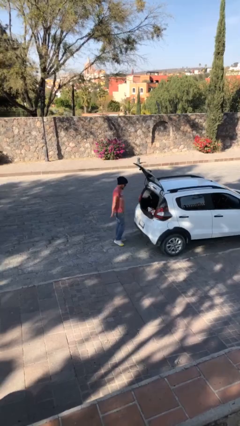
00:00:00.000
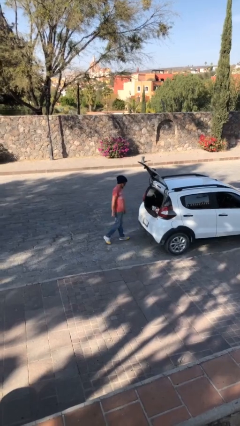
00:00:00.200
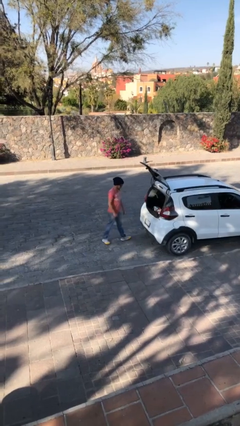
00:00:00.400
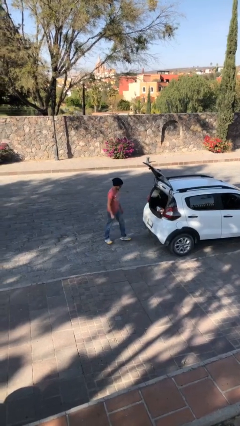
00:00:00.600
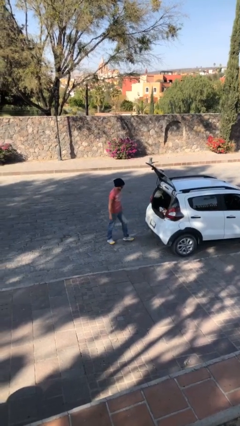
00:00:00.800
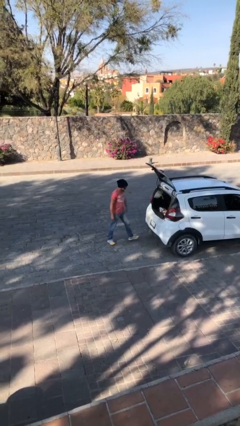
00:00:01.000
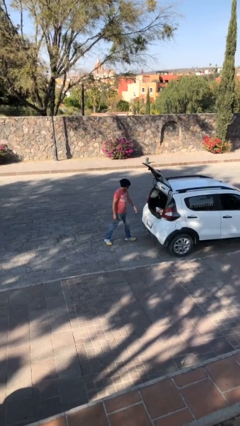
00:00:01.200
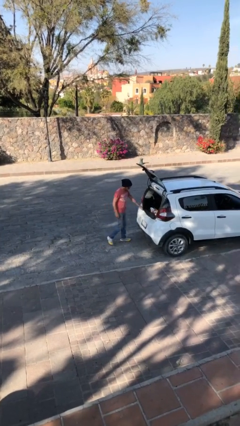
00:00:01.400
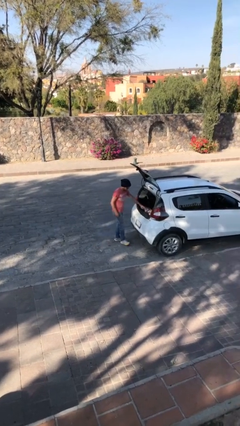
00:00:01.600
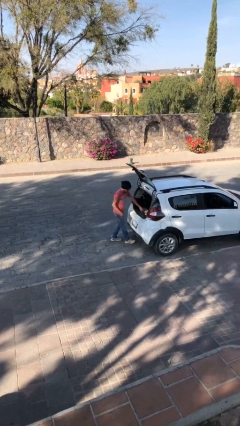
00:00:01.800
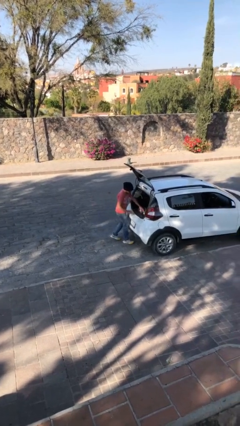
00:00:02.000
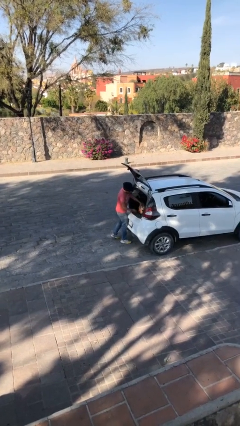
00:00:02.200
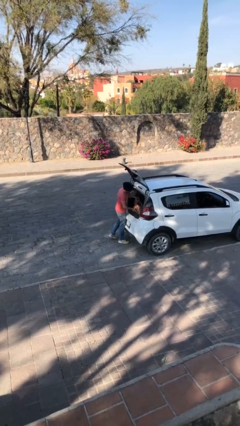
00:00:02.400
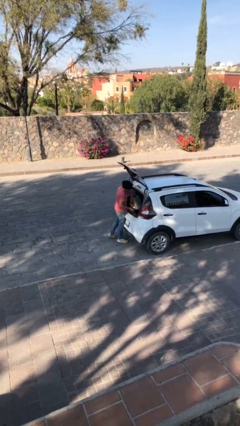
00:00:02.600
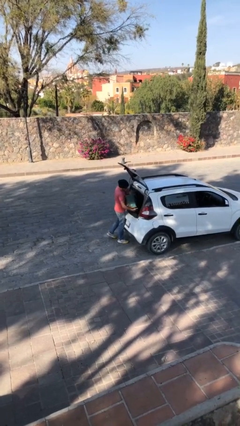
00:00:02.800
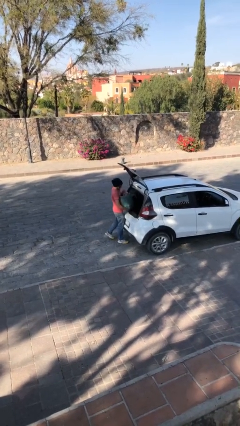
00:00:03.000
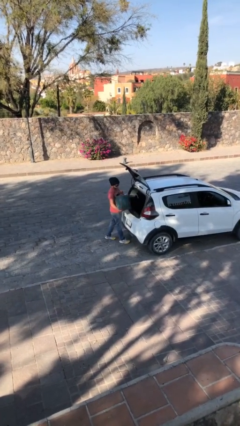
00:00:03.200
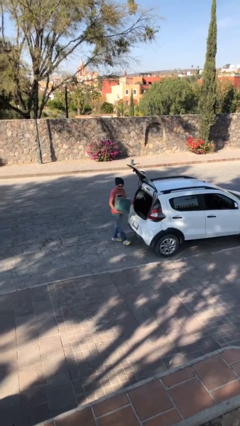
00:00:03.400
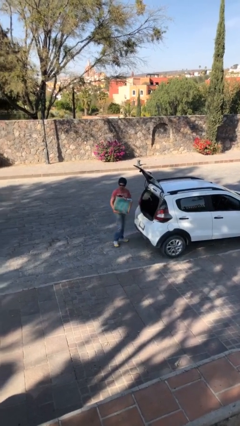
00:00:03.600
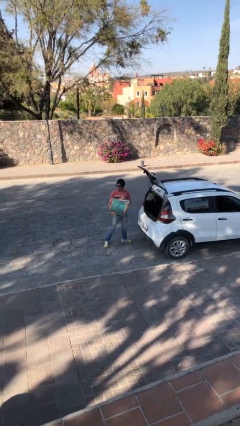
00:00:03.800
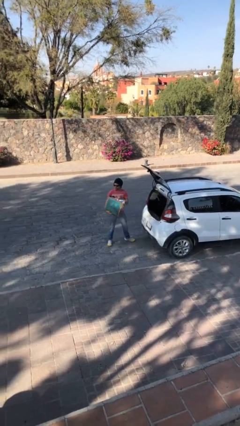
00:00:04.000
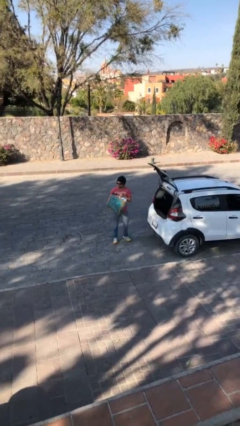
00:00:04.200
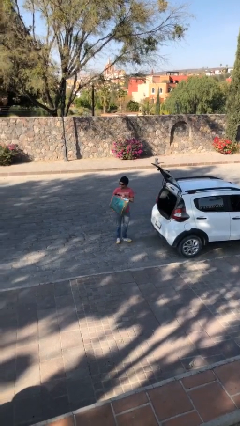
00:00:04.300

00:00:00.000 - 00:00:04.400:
person unloads car

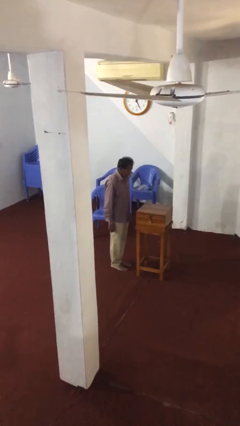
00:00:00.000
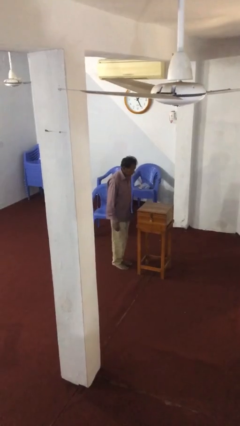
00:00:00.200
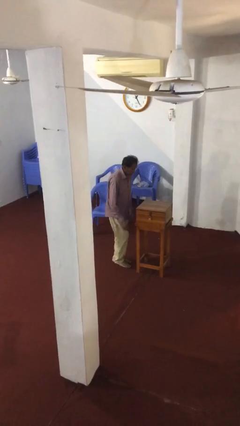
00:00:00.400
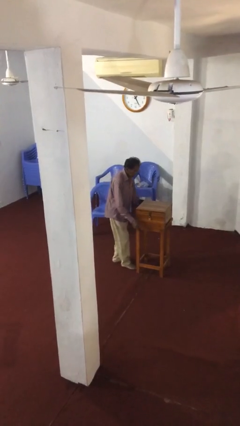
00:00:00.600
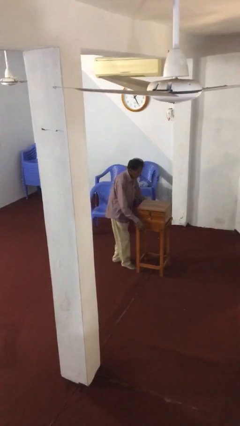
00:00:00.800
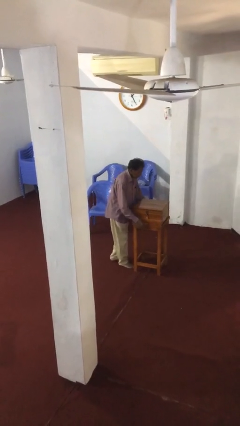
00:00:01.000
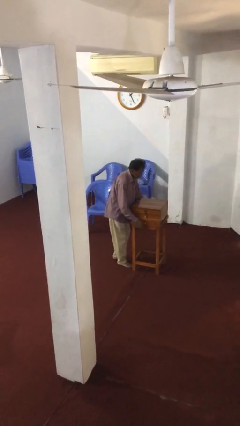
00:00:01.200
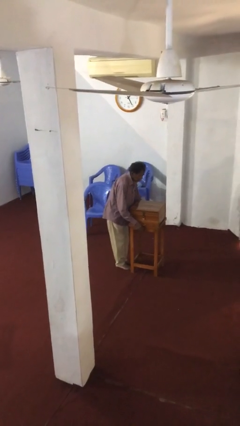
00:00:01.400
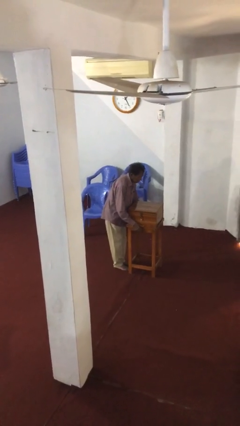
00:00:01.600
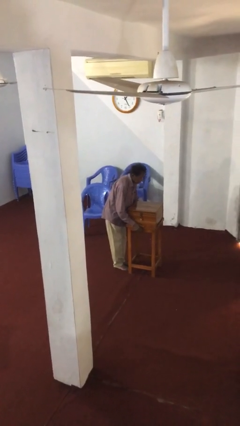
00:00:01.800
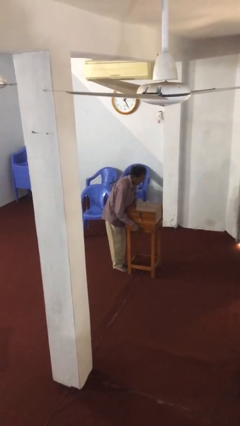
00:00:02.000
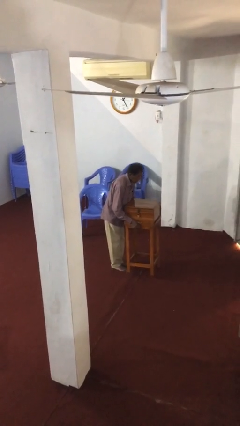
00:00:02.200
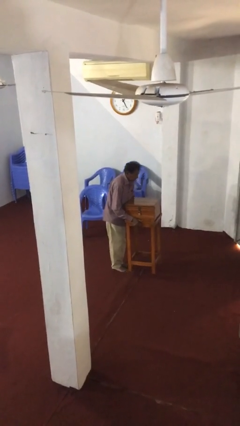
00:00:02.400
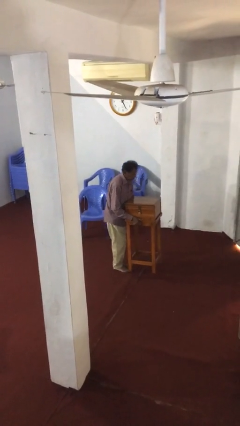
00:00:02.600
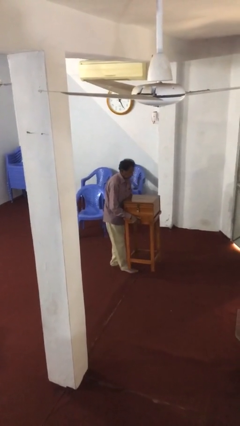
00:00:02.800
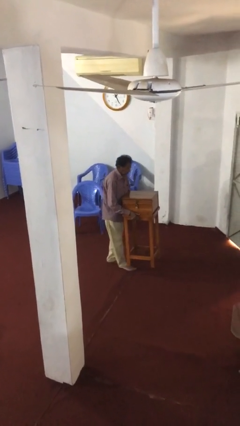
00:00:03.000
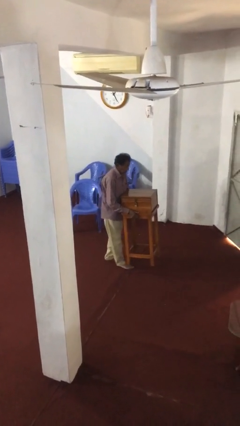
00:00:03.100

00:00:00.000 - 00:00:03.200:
person picks up object from floor

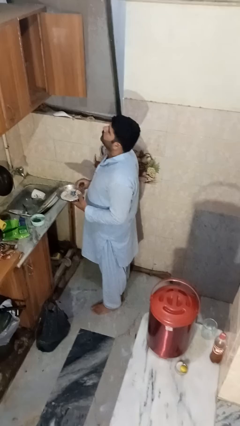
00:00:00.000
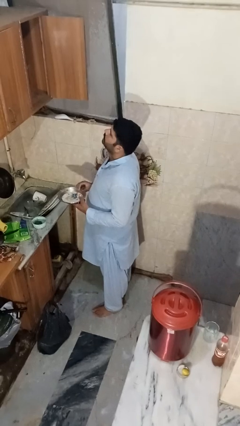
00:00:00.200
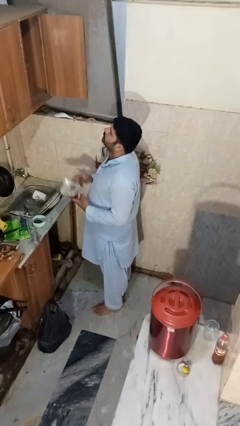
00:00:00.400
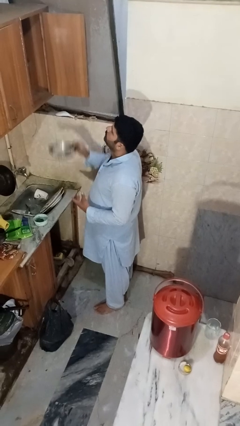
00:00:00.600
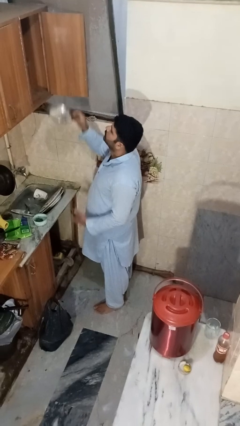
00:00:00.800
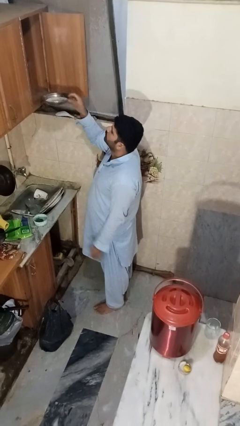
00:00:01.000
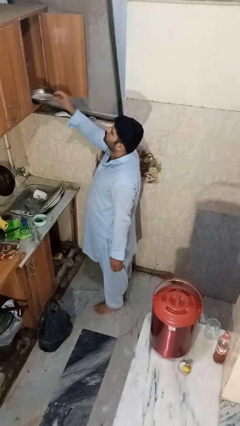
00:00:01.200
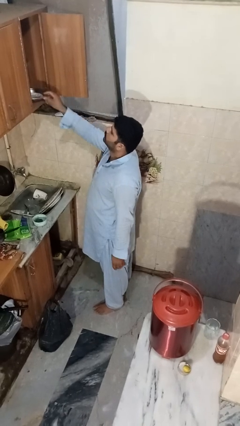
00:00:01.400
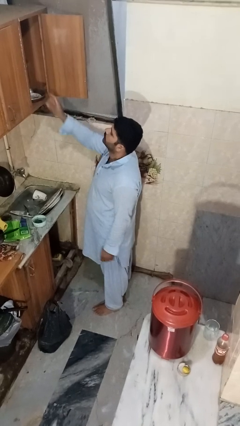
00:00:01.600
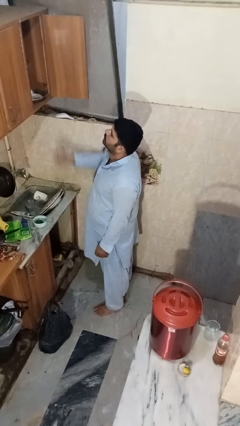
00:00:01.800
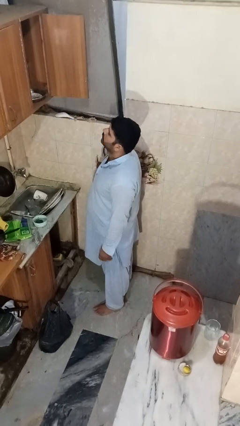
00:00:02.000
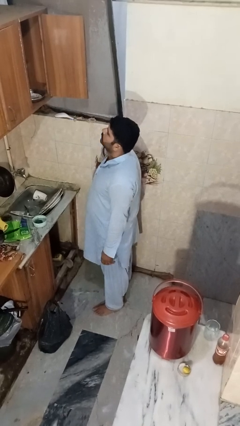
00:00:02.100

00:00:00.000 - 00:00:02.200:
person puts object in cabinet

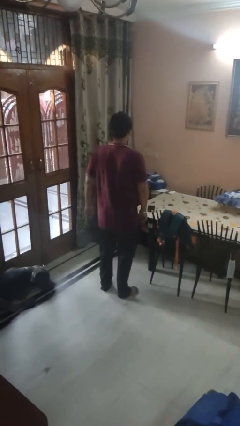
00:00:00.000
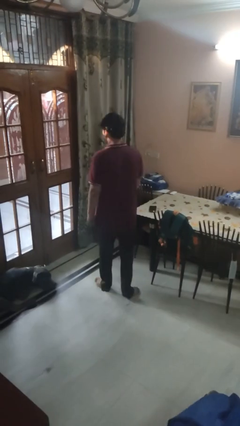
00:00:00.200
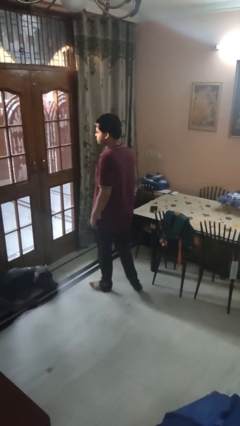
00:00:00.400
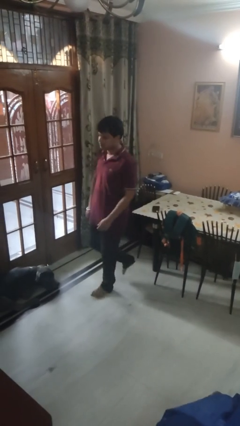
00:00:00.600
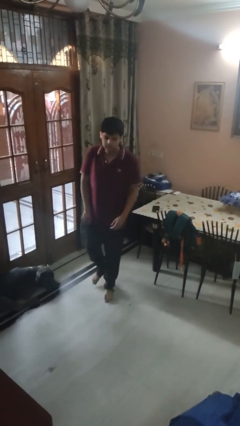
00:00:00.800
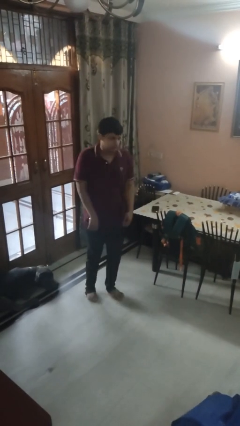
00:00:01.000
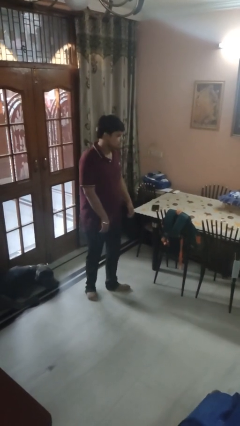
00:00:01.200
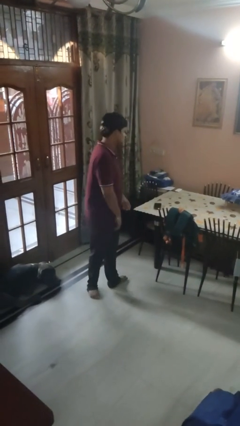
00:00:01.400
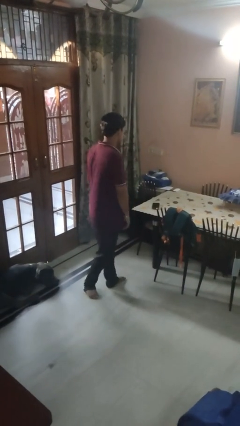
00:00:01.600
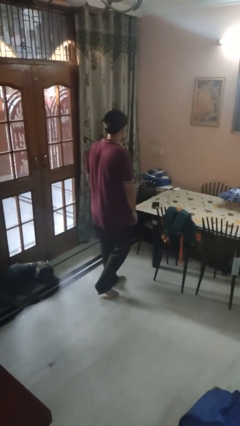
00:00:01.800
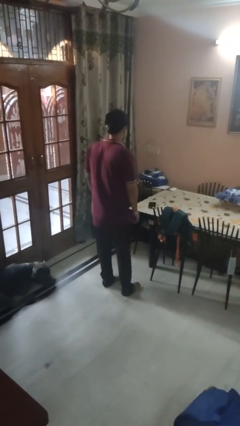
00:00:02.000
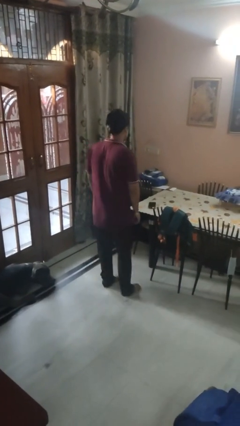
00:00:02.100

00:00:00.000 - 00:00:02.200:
person twirls

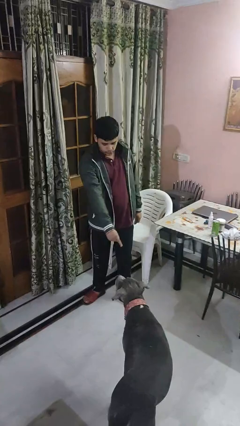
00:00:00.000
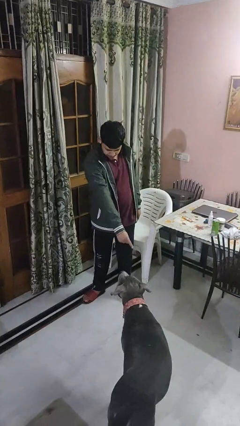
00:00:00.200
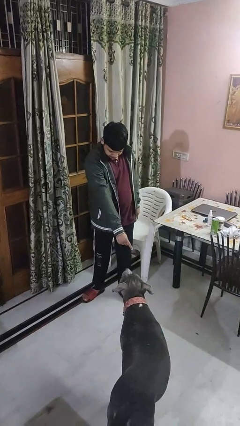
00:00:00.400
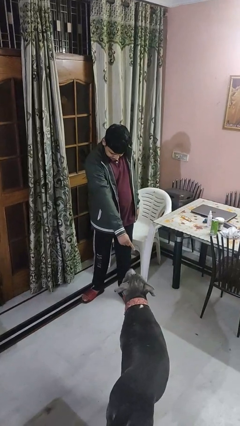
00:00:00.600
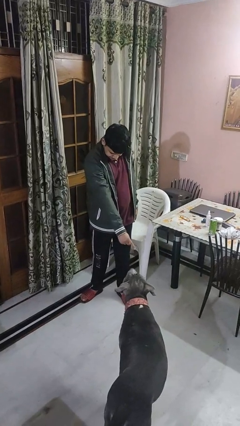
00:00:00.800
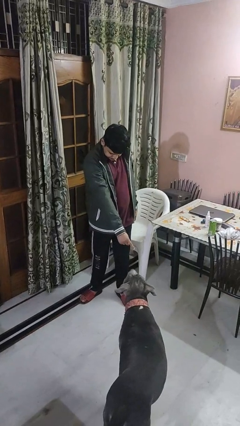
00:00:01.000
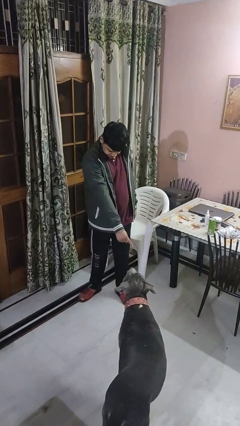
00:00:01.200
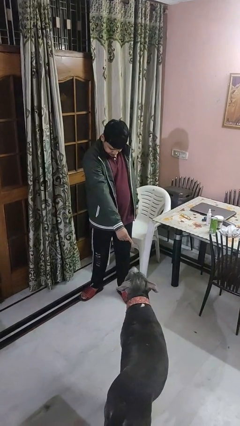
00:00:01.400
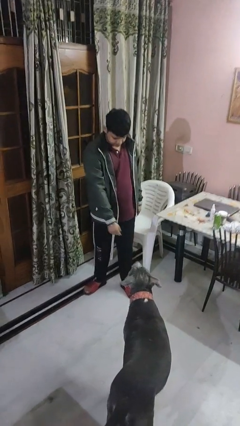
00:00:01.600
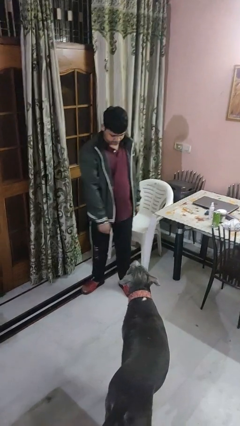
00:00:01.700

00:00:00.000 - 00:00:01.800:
person points to dog

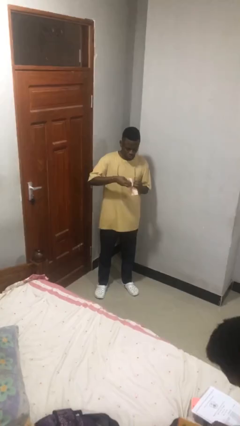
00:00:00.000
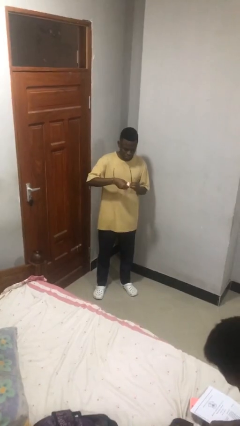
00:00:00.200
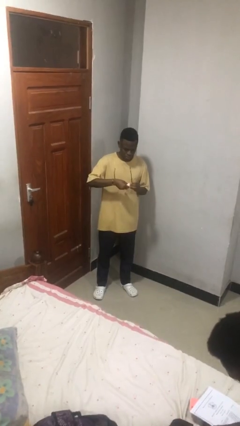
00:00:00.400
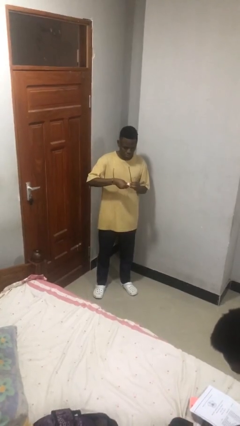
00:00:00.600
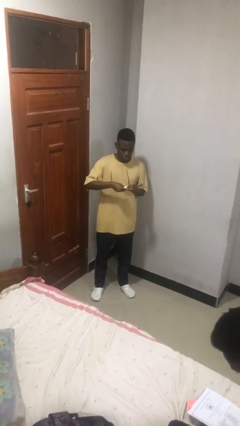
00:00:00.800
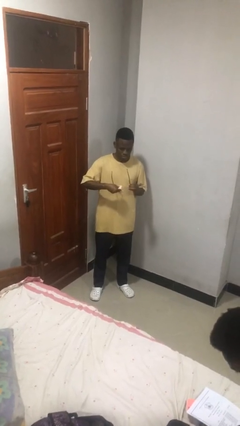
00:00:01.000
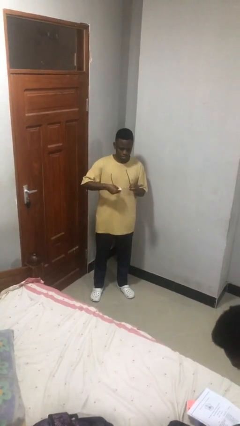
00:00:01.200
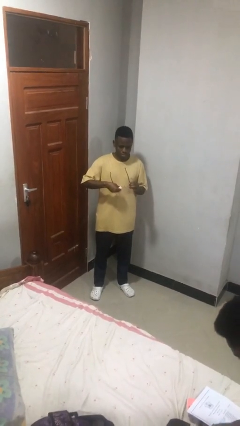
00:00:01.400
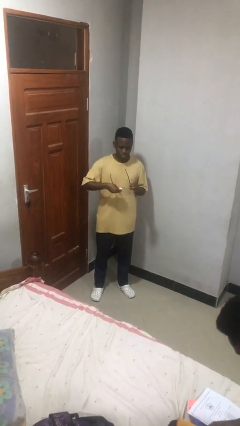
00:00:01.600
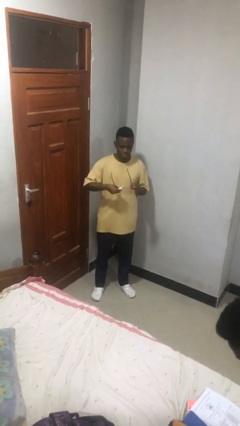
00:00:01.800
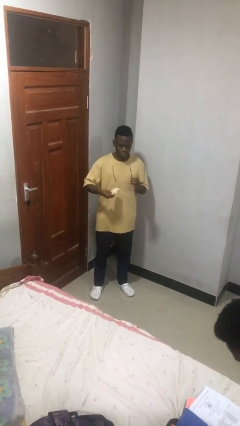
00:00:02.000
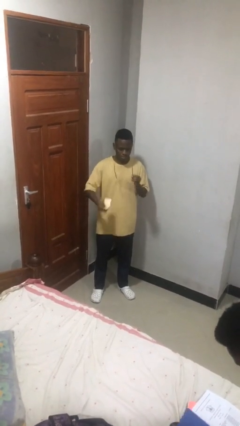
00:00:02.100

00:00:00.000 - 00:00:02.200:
person cleans eyeglasses

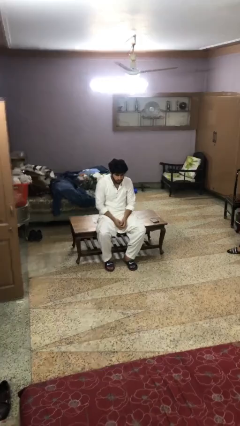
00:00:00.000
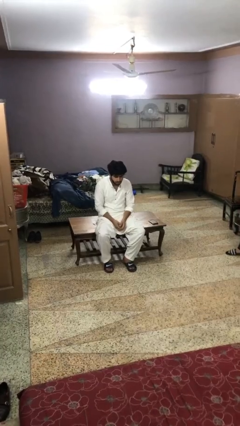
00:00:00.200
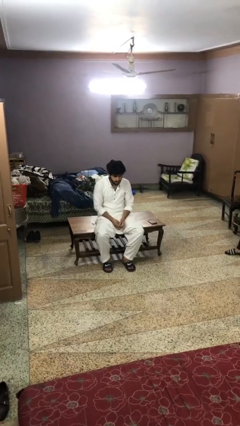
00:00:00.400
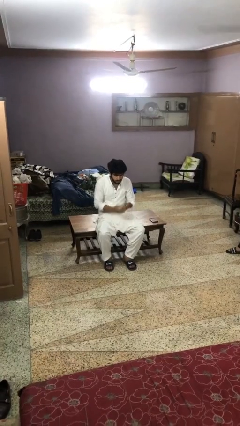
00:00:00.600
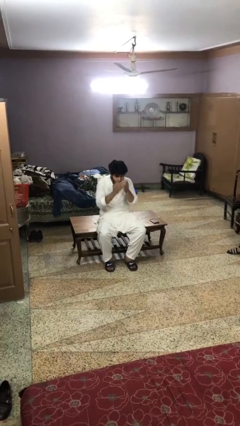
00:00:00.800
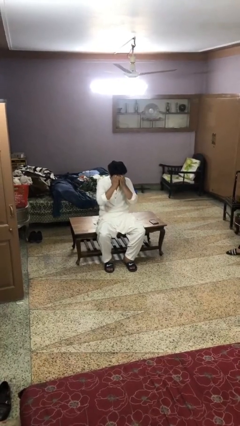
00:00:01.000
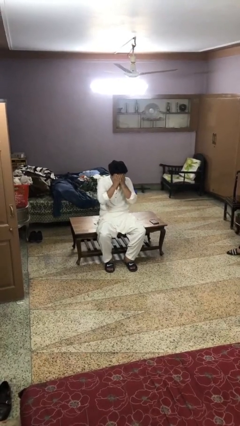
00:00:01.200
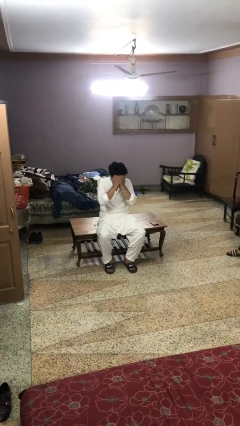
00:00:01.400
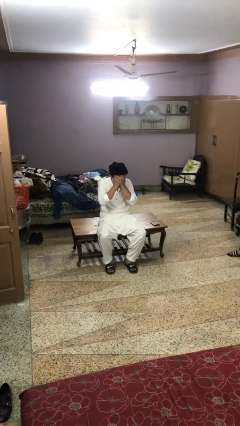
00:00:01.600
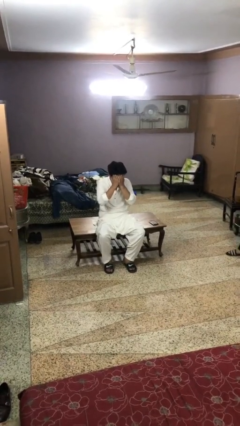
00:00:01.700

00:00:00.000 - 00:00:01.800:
person covers face with hands
